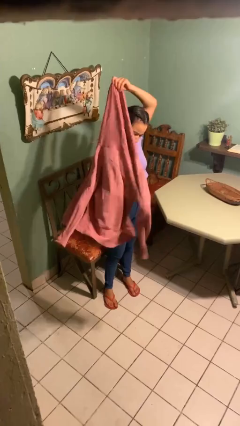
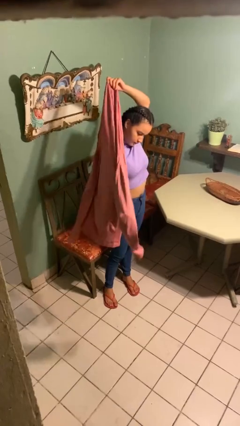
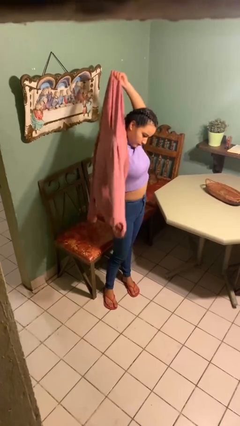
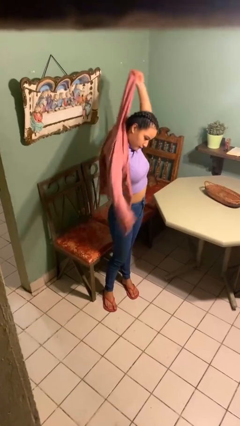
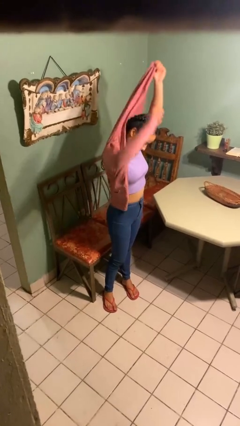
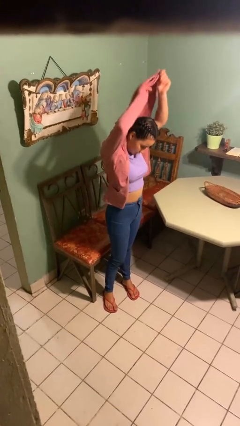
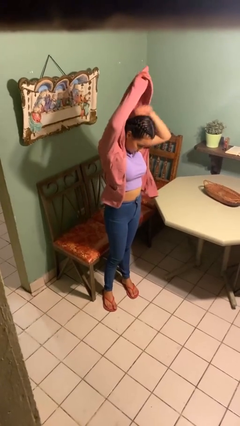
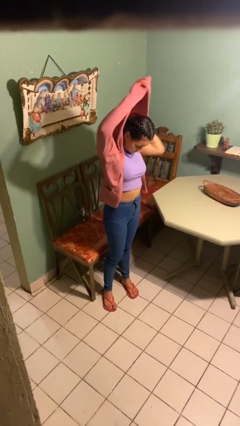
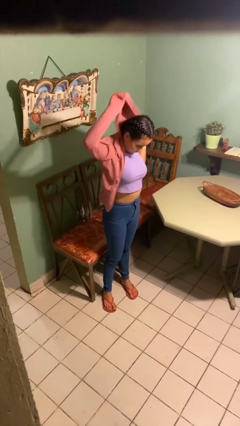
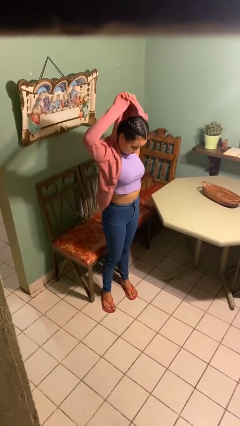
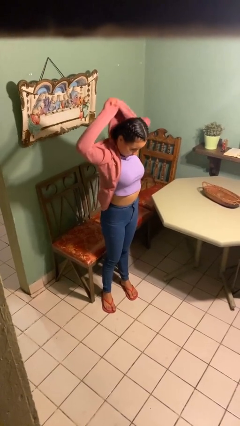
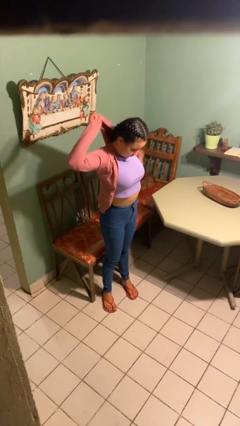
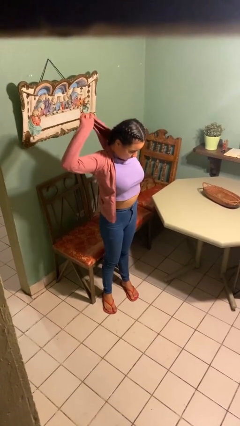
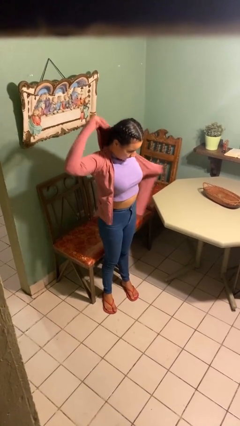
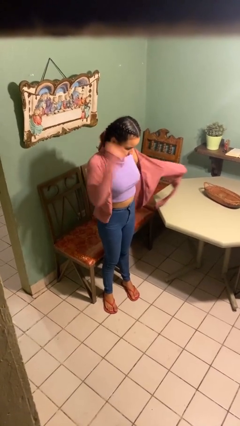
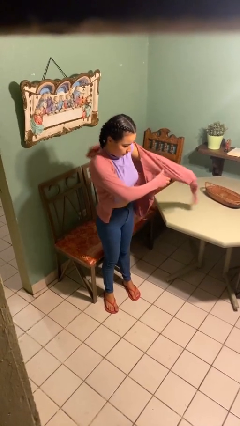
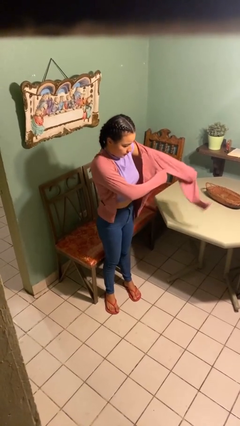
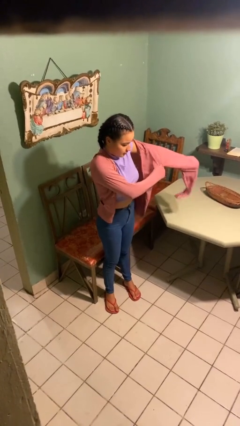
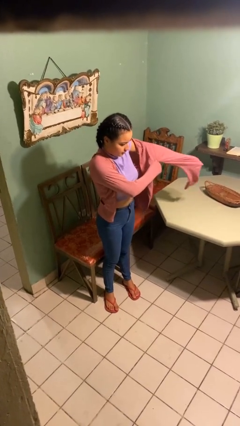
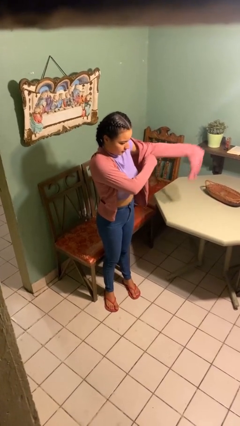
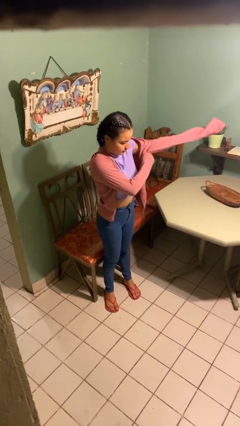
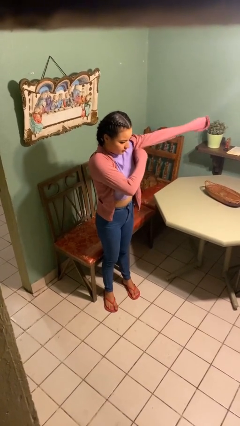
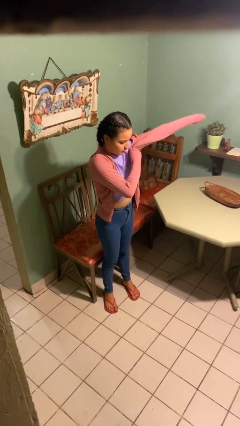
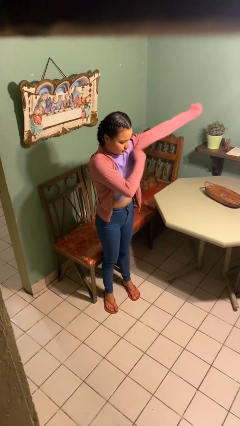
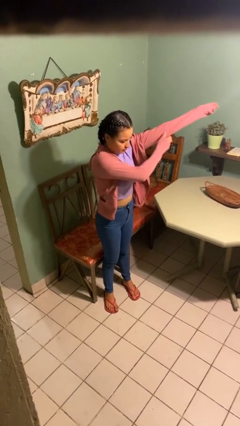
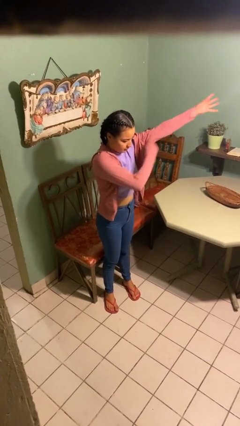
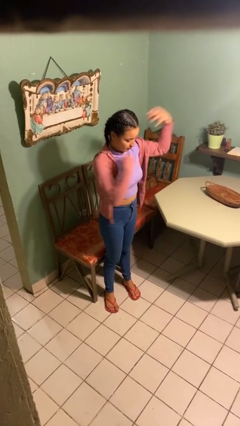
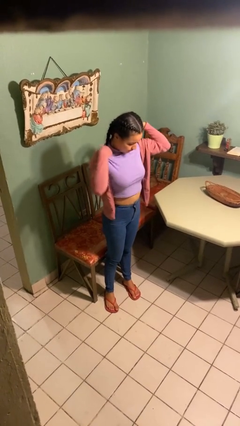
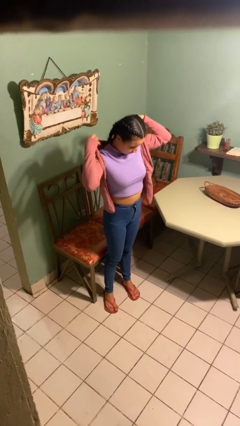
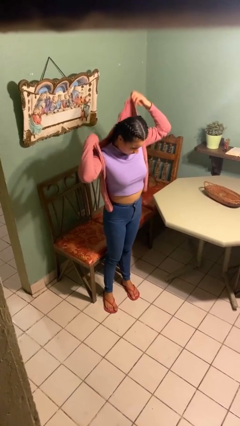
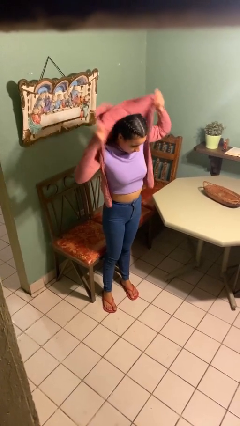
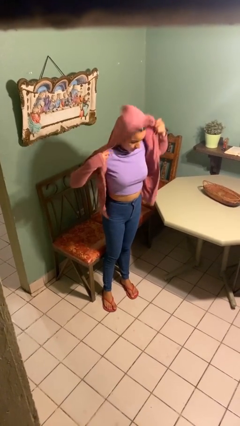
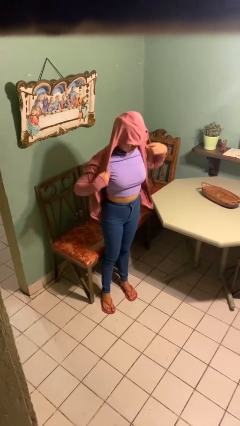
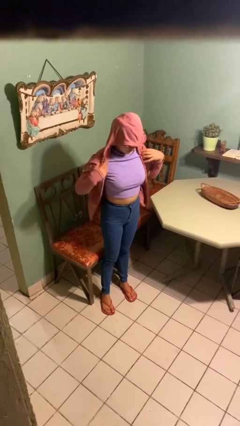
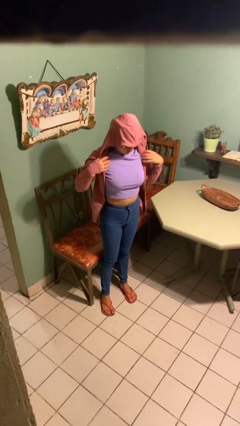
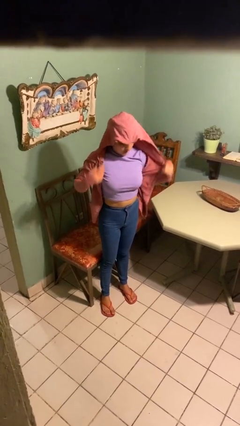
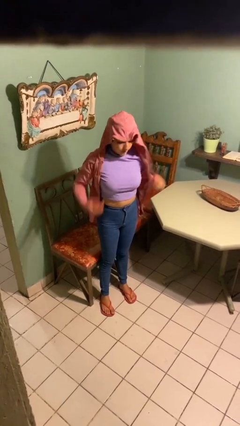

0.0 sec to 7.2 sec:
person puts on hoodie

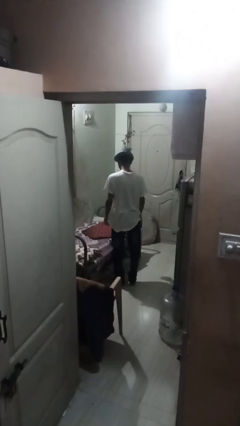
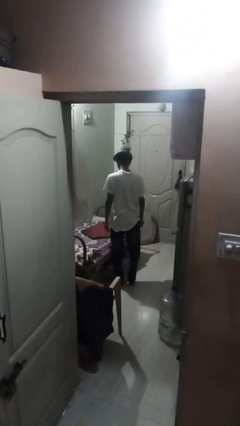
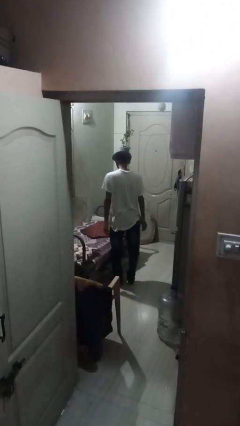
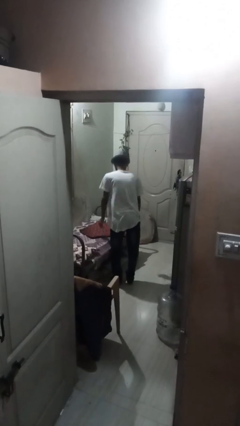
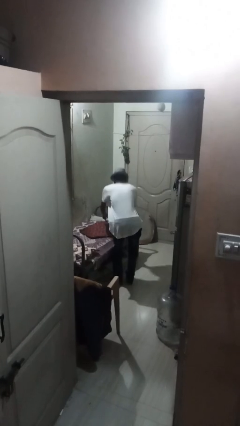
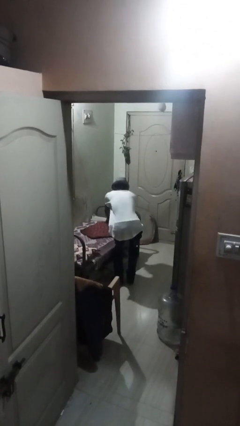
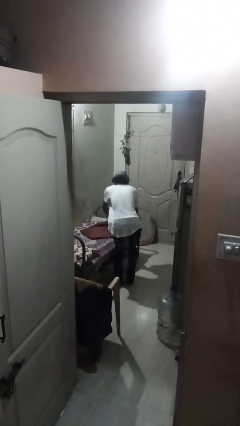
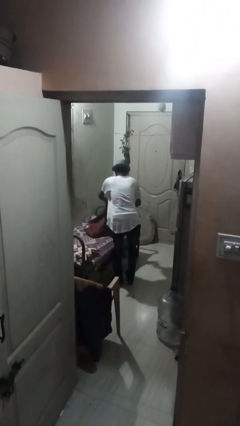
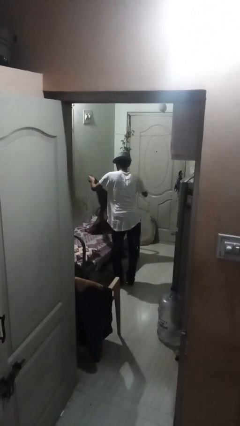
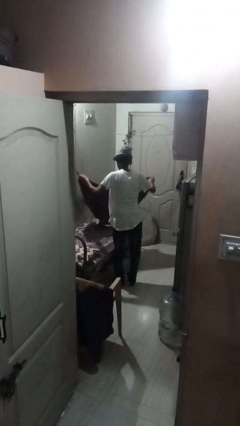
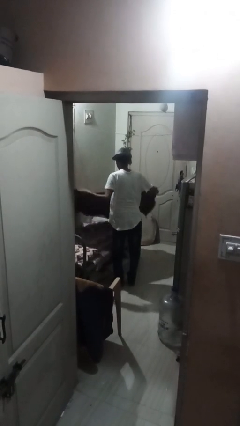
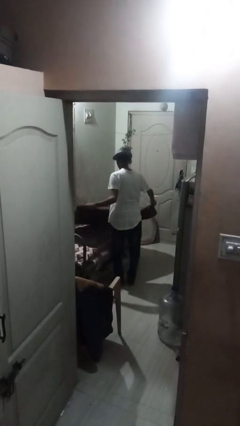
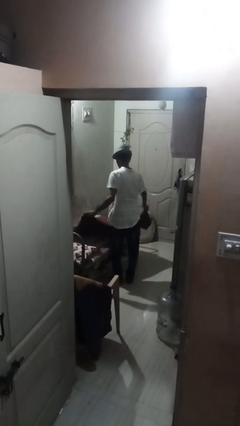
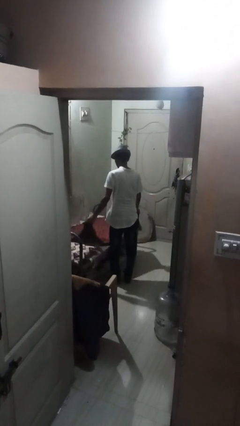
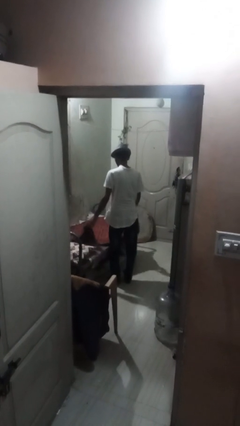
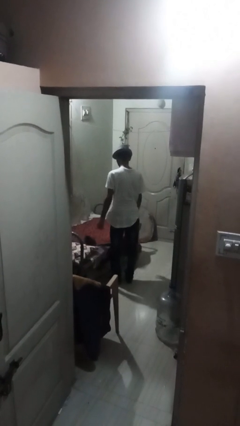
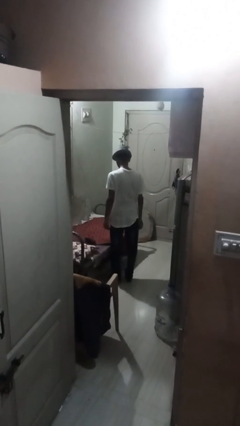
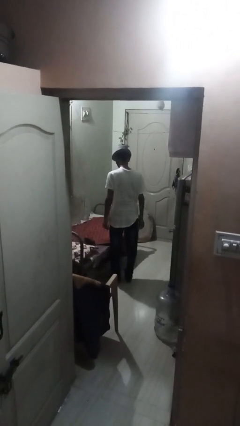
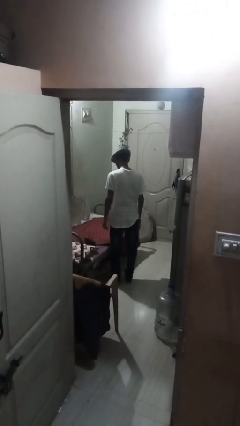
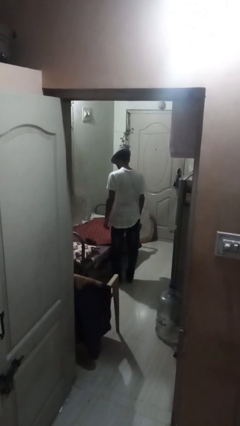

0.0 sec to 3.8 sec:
person unfolds blanket

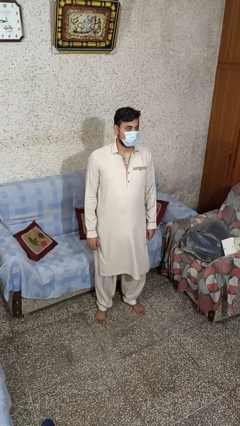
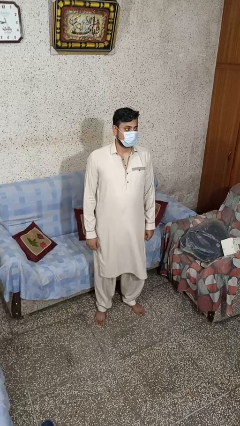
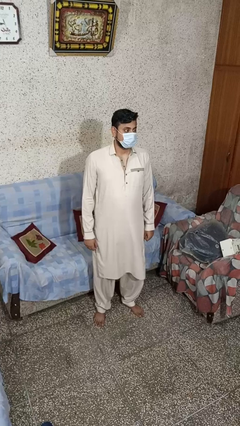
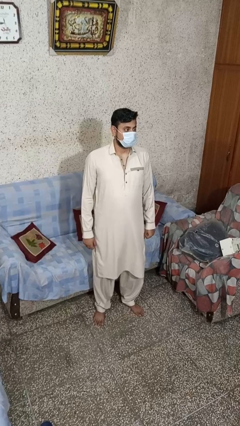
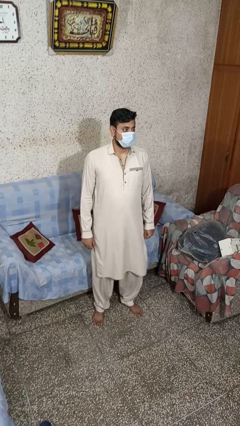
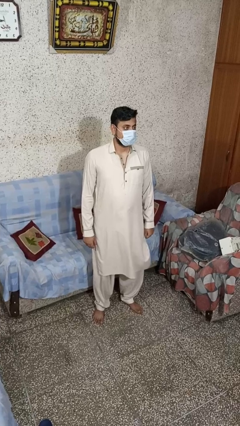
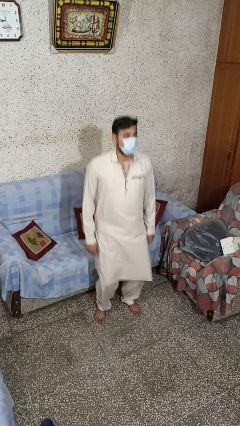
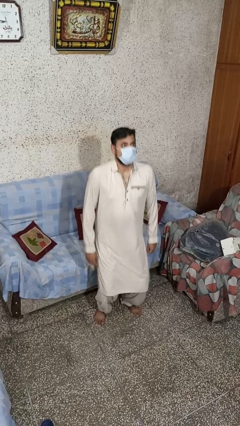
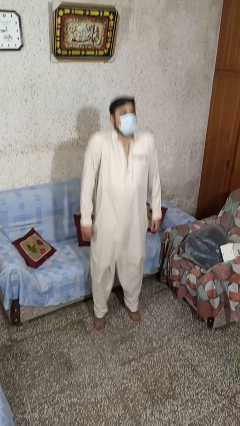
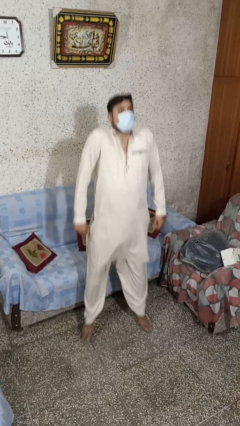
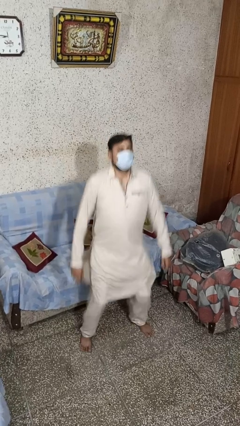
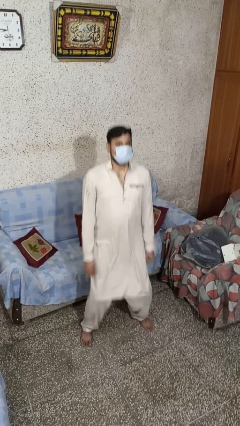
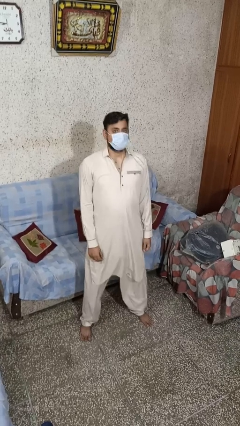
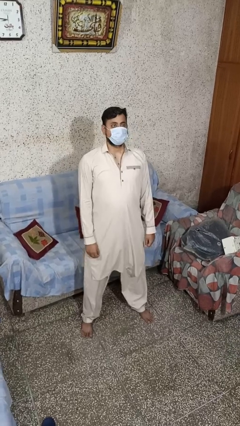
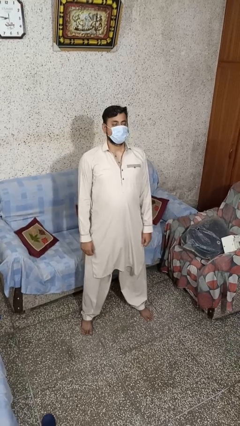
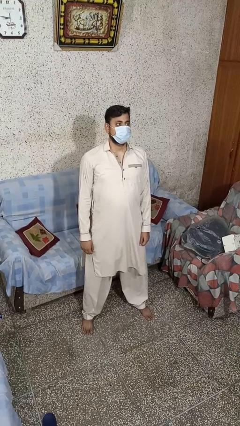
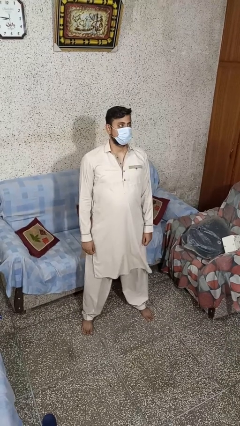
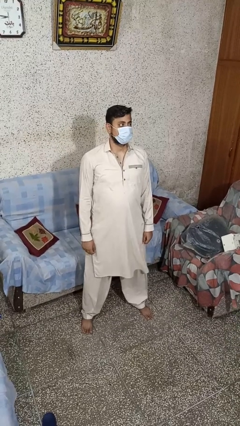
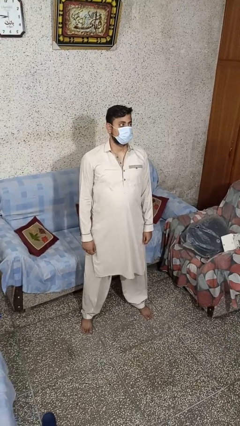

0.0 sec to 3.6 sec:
person jumps

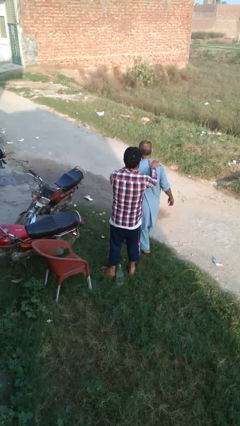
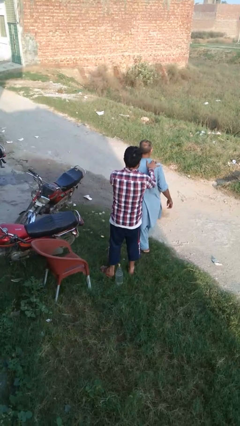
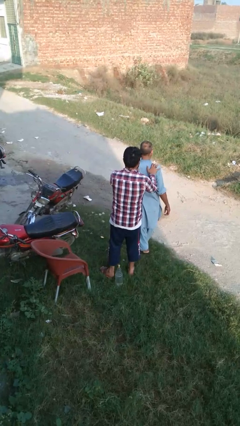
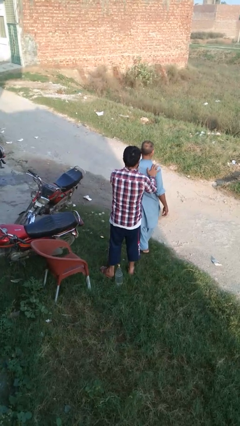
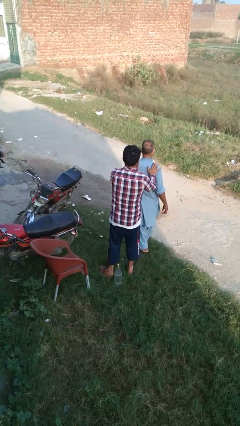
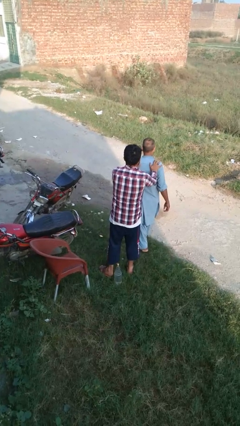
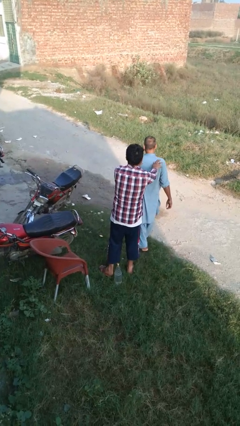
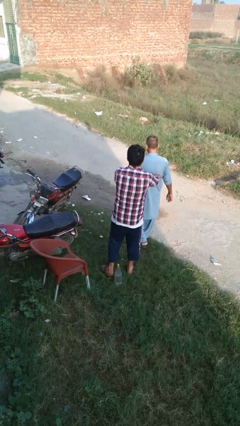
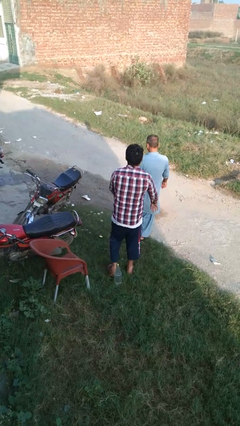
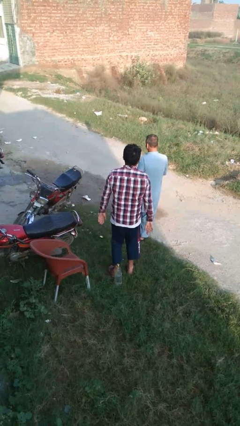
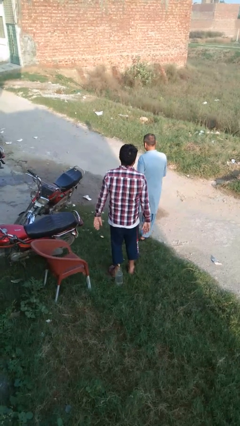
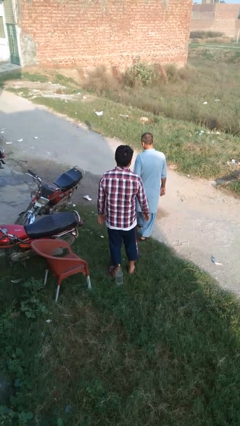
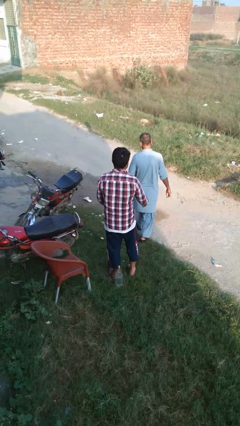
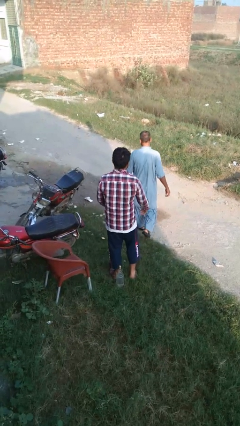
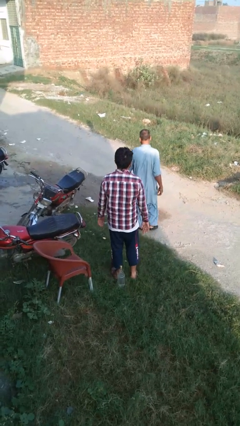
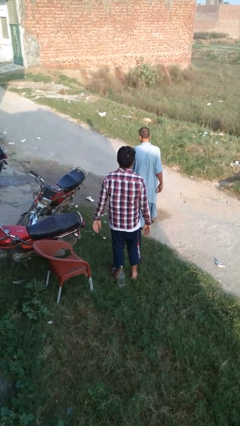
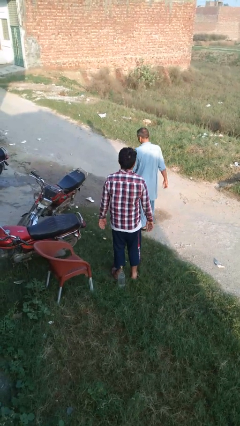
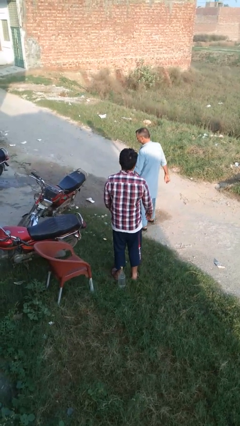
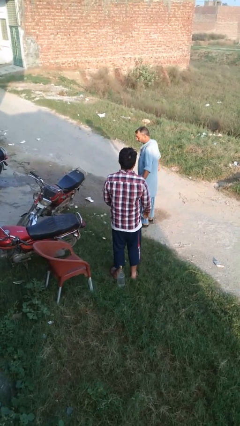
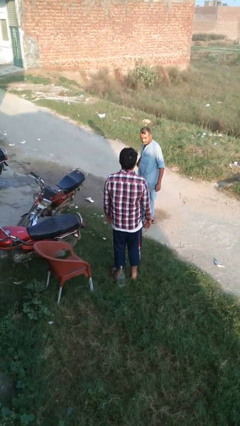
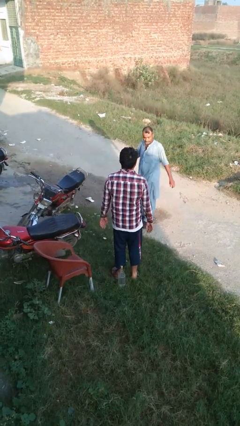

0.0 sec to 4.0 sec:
person spins person around
